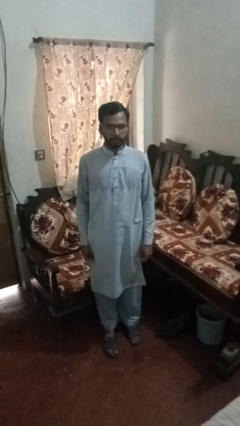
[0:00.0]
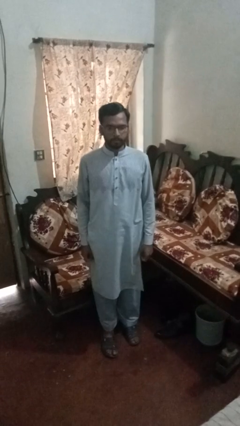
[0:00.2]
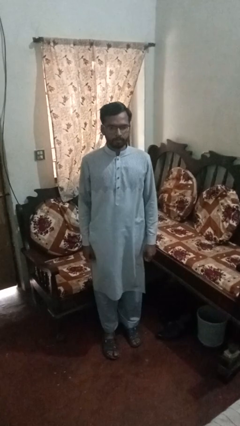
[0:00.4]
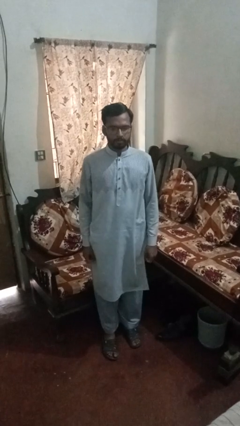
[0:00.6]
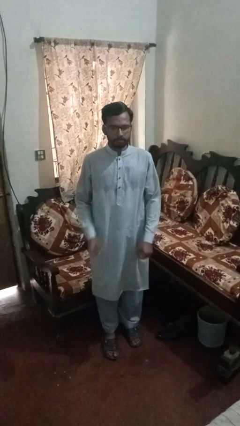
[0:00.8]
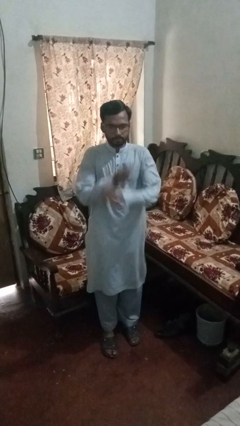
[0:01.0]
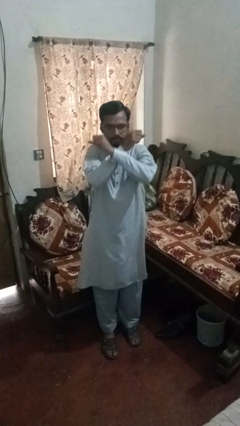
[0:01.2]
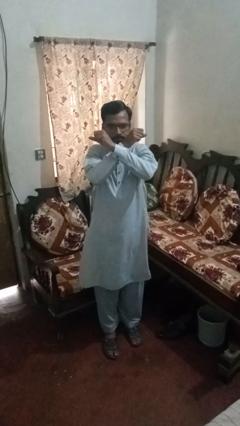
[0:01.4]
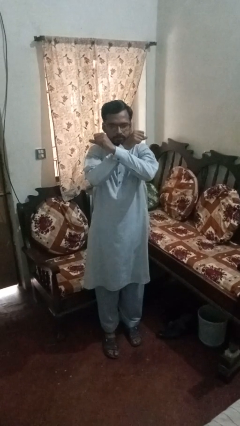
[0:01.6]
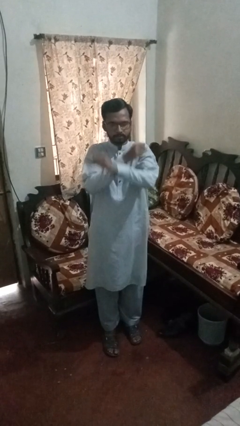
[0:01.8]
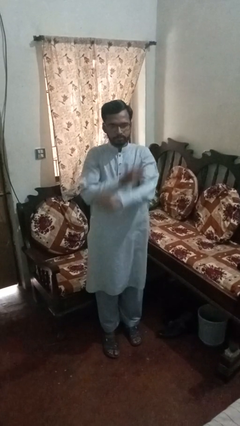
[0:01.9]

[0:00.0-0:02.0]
person karate chop

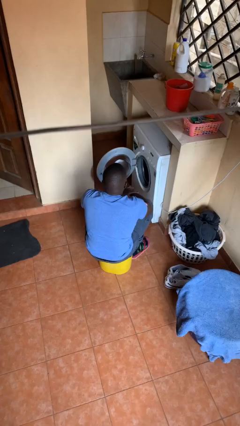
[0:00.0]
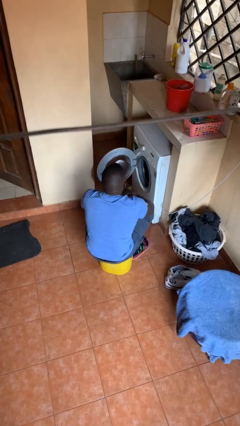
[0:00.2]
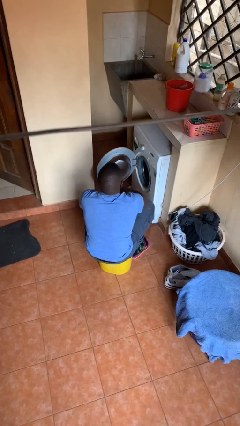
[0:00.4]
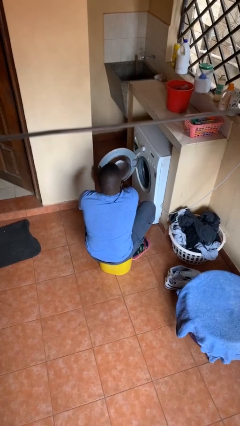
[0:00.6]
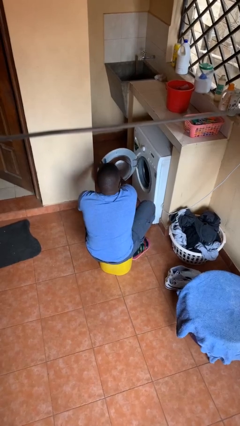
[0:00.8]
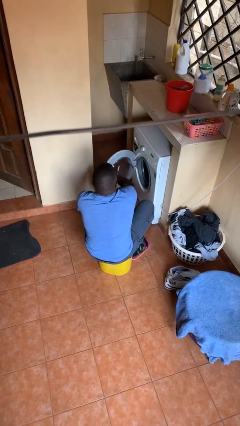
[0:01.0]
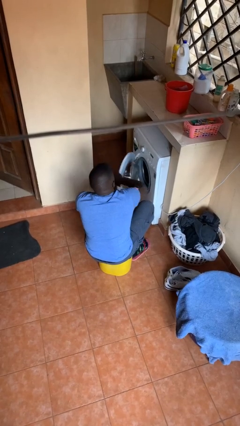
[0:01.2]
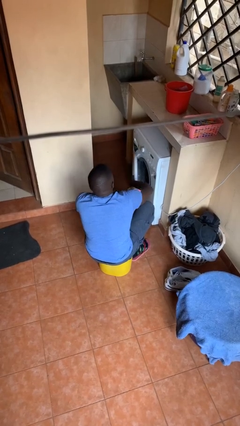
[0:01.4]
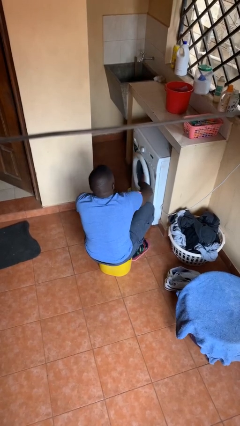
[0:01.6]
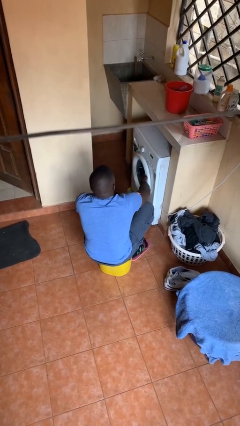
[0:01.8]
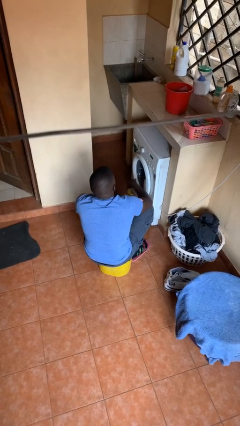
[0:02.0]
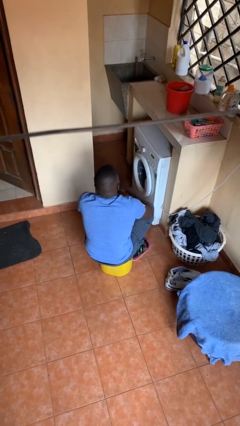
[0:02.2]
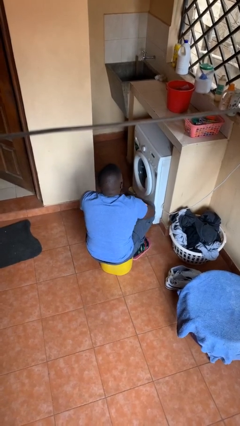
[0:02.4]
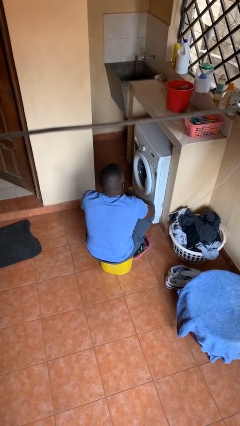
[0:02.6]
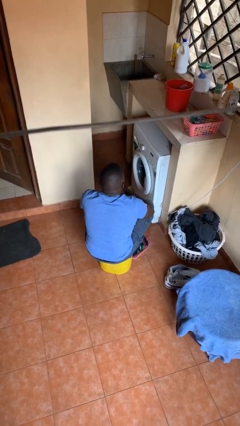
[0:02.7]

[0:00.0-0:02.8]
person closes clothes washer

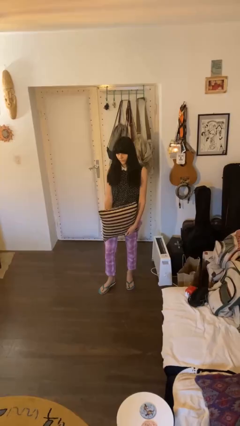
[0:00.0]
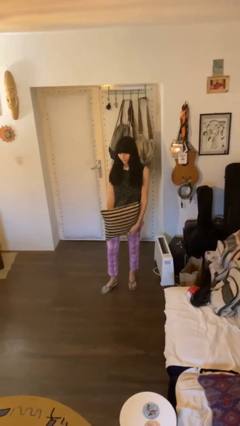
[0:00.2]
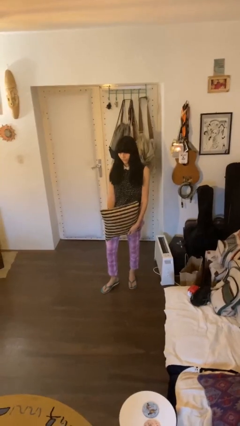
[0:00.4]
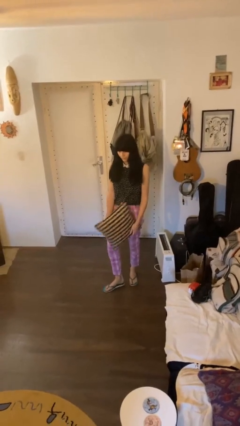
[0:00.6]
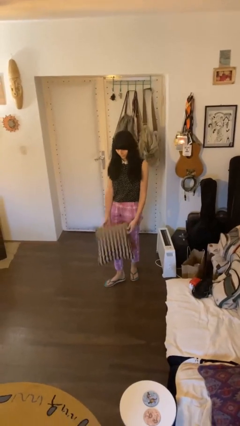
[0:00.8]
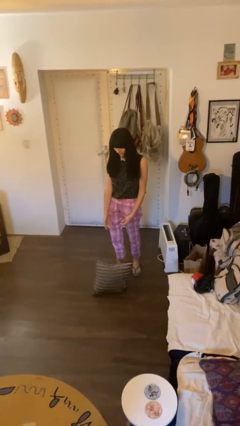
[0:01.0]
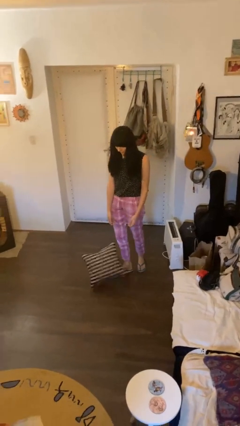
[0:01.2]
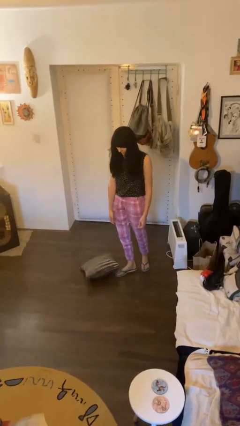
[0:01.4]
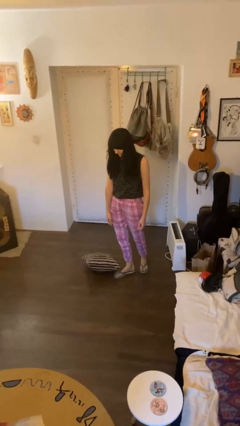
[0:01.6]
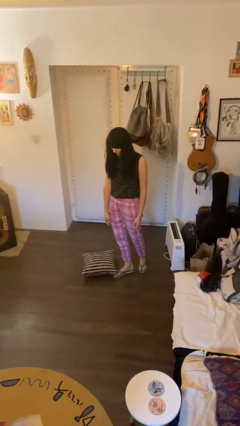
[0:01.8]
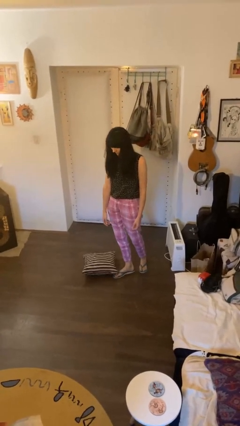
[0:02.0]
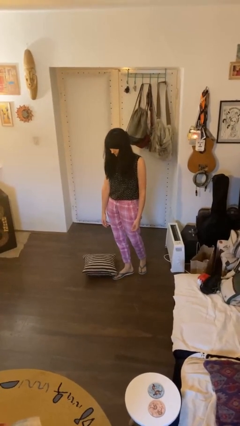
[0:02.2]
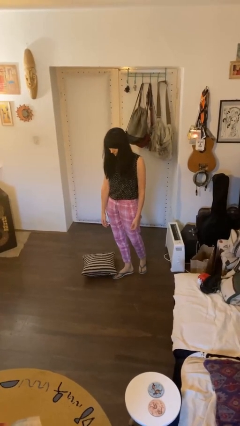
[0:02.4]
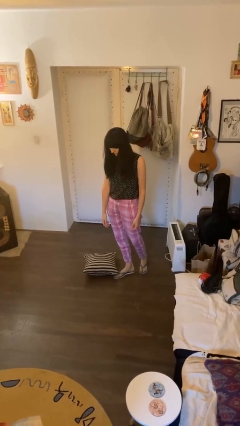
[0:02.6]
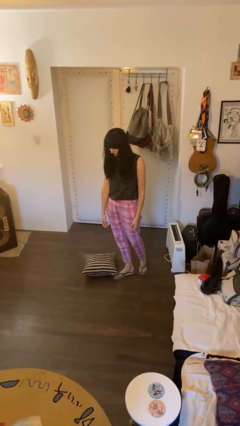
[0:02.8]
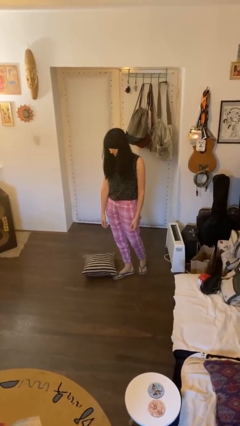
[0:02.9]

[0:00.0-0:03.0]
person drops object

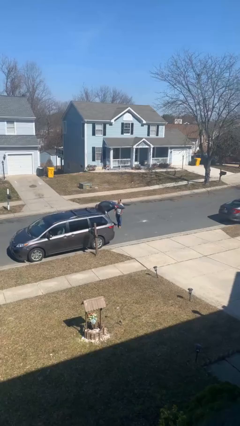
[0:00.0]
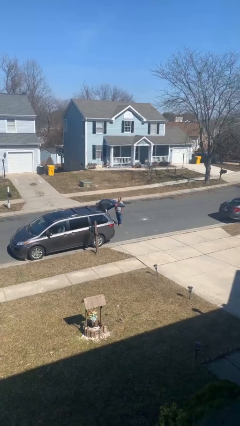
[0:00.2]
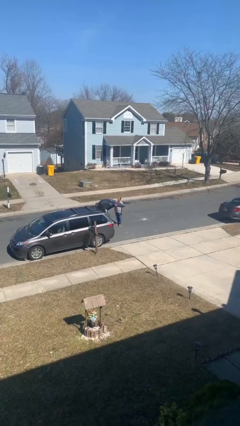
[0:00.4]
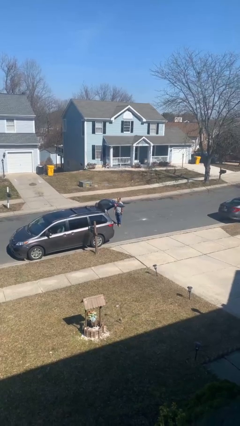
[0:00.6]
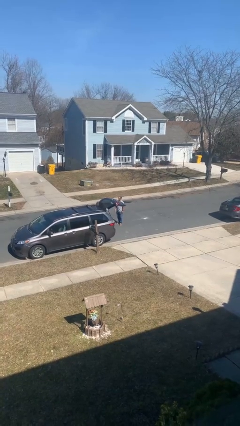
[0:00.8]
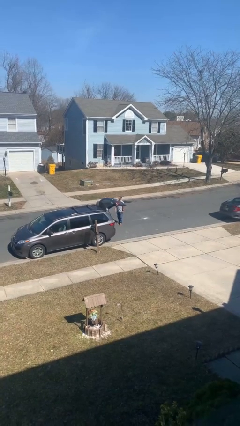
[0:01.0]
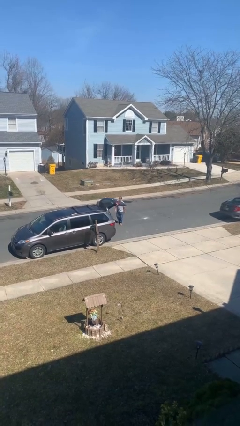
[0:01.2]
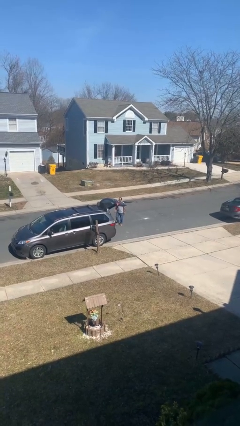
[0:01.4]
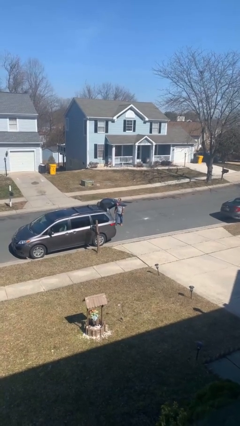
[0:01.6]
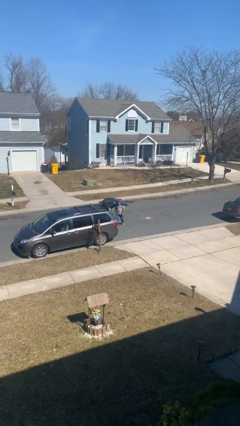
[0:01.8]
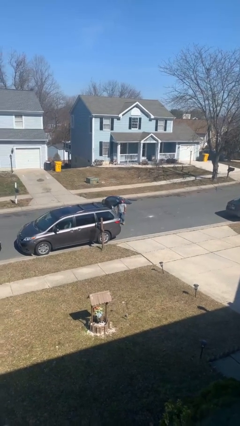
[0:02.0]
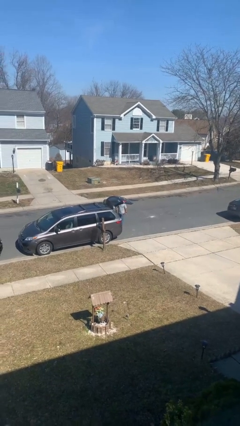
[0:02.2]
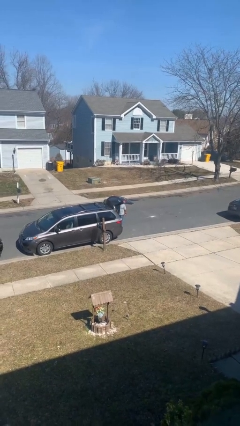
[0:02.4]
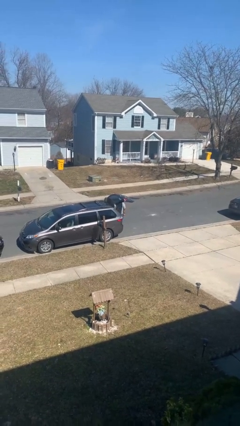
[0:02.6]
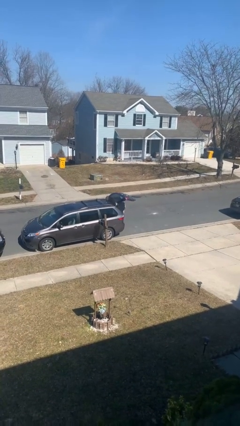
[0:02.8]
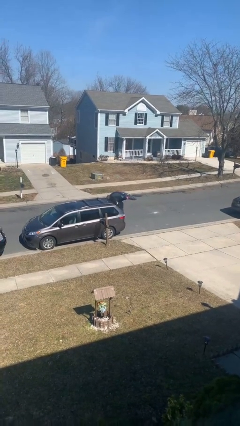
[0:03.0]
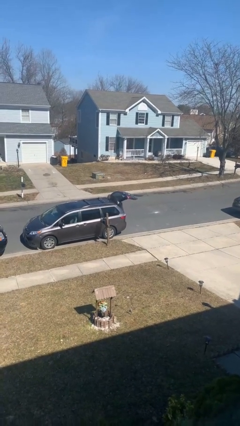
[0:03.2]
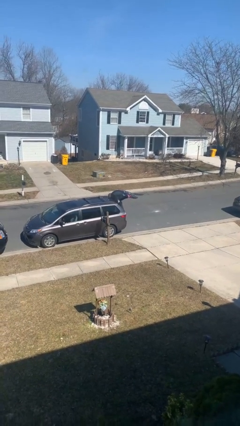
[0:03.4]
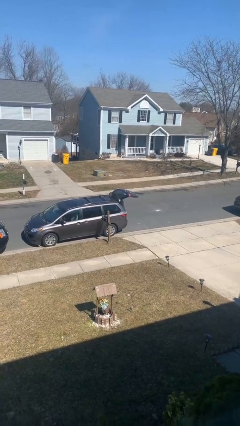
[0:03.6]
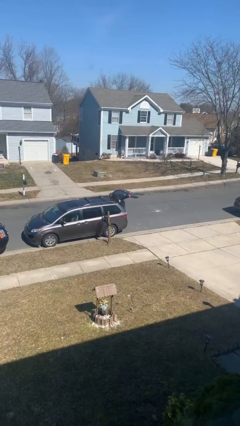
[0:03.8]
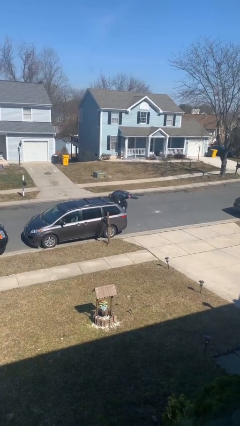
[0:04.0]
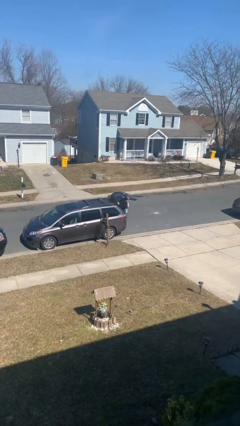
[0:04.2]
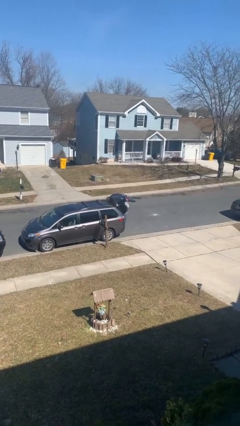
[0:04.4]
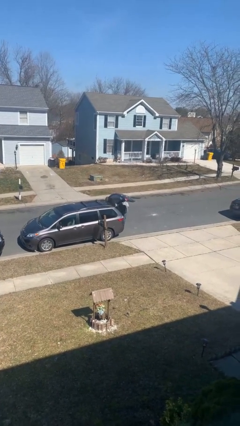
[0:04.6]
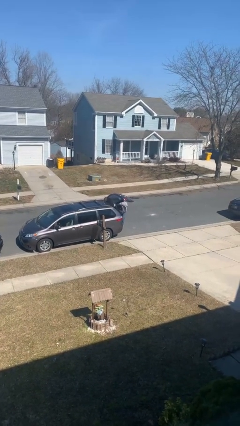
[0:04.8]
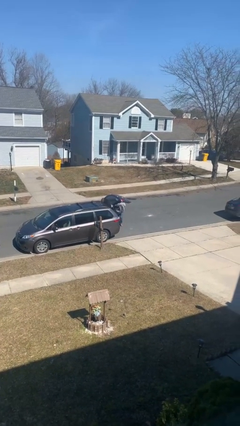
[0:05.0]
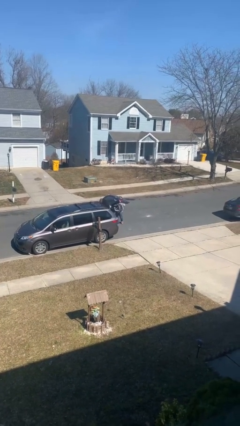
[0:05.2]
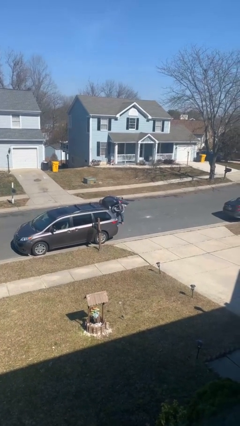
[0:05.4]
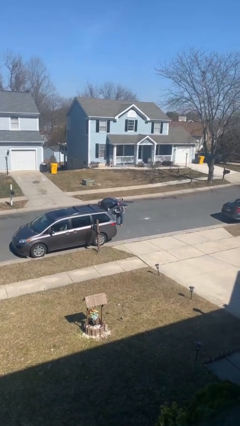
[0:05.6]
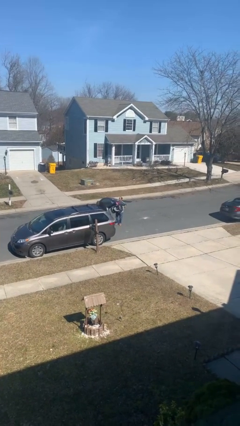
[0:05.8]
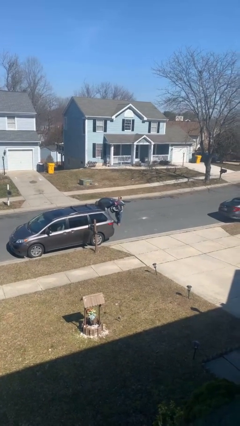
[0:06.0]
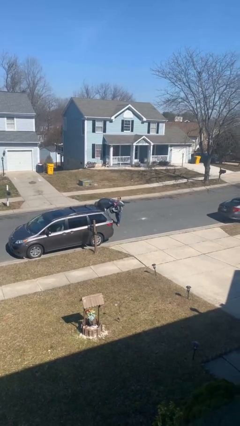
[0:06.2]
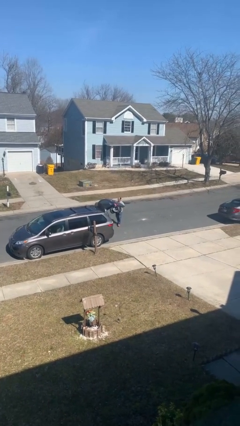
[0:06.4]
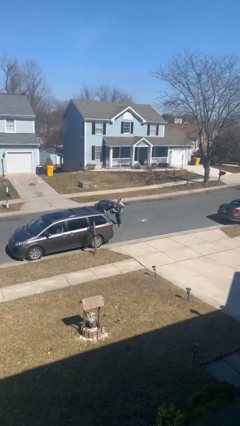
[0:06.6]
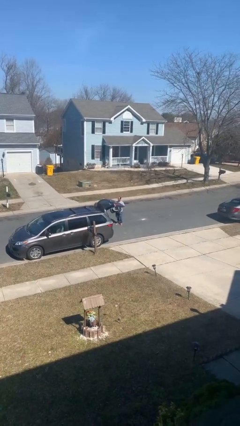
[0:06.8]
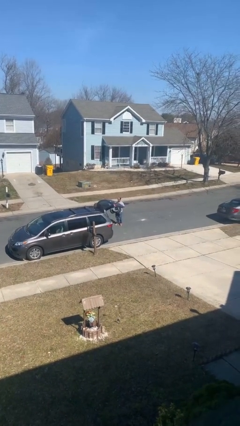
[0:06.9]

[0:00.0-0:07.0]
person unloads car

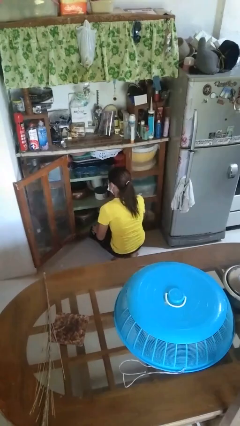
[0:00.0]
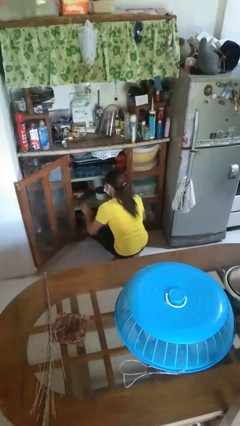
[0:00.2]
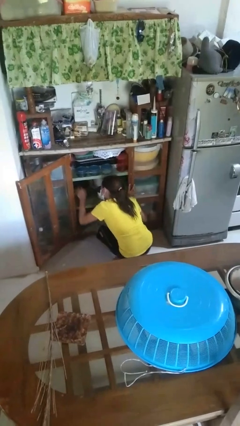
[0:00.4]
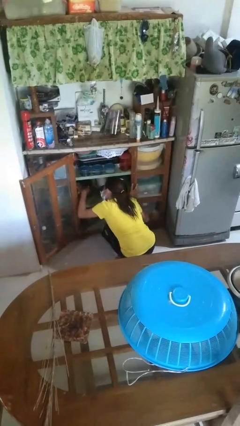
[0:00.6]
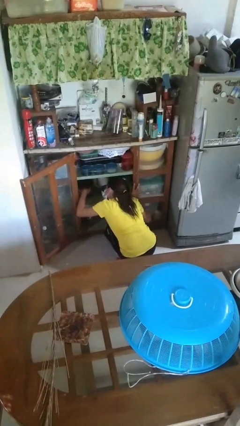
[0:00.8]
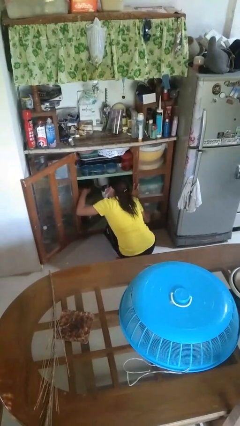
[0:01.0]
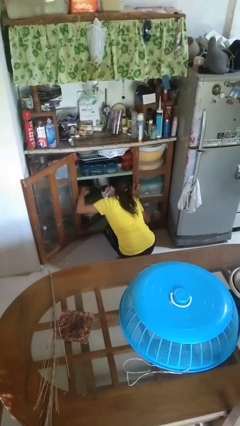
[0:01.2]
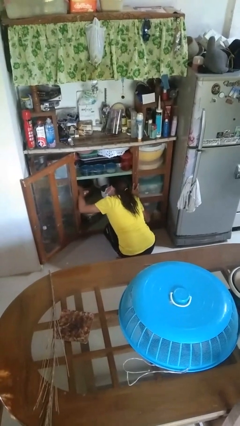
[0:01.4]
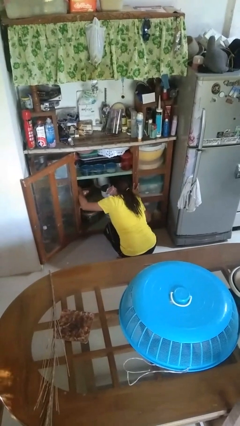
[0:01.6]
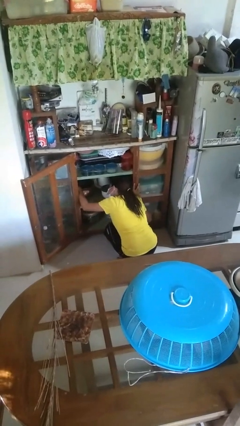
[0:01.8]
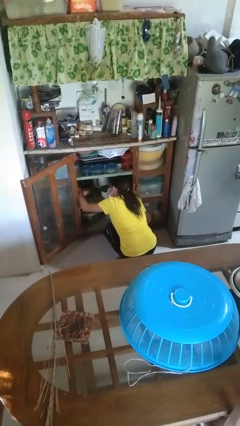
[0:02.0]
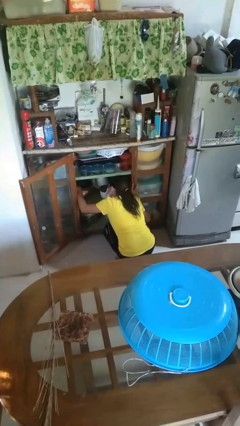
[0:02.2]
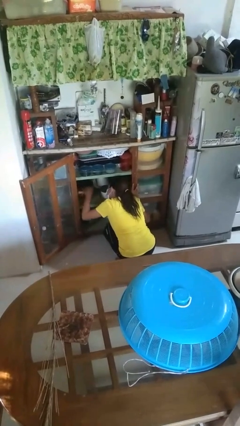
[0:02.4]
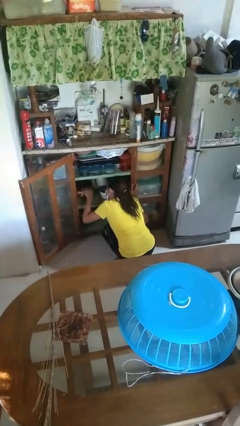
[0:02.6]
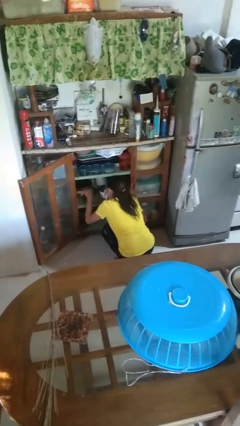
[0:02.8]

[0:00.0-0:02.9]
person searches in cabinet

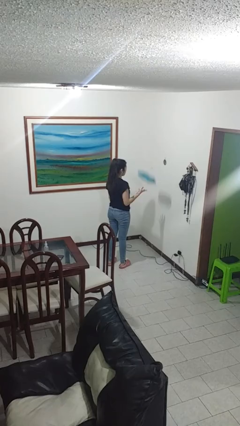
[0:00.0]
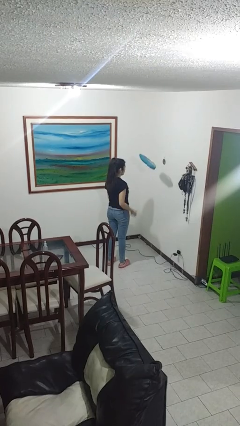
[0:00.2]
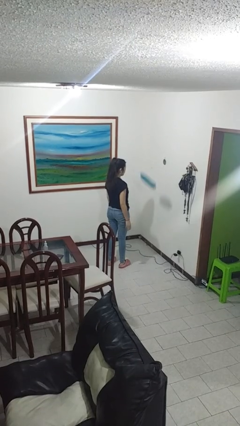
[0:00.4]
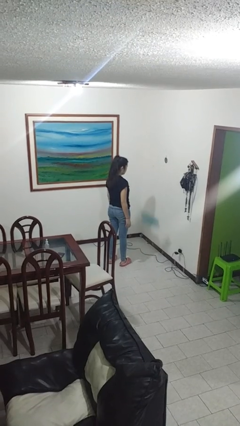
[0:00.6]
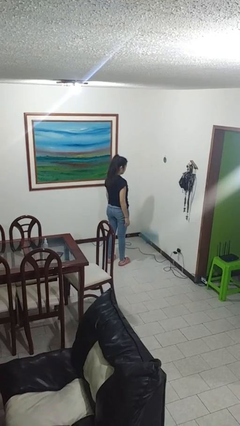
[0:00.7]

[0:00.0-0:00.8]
person throws object into air
